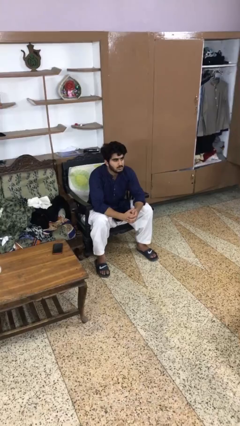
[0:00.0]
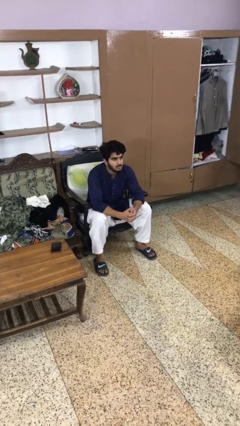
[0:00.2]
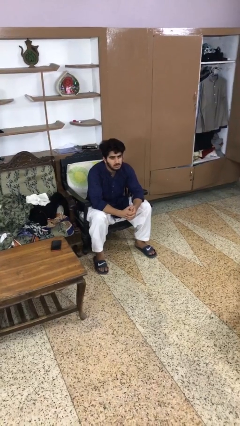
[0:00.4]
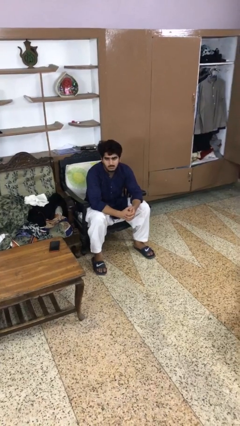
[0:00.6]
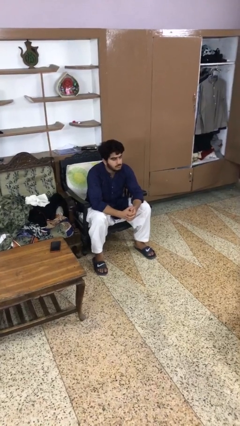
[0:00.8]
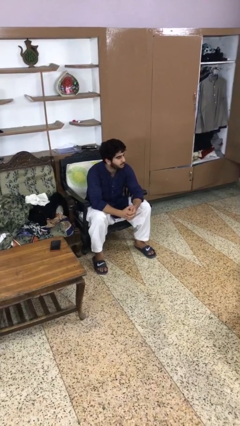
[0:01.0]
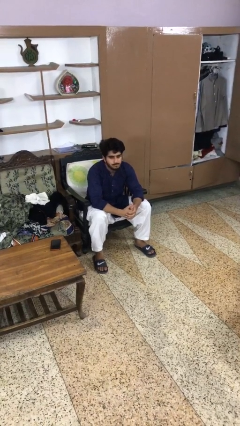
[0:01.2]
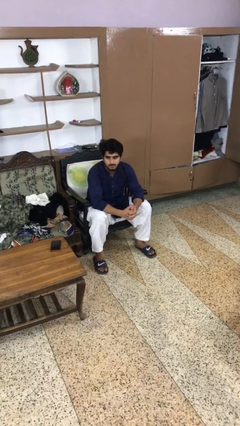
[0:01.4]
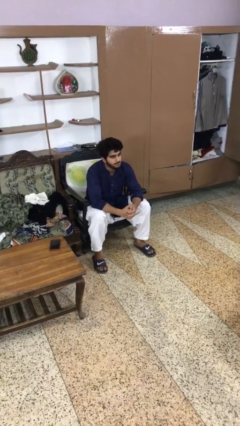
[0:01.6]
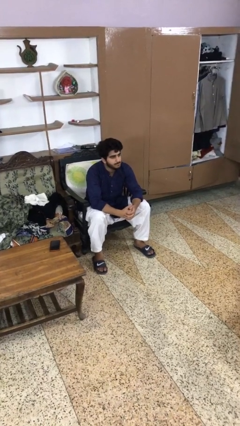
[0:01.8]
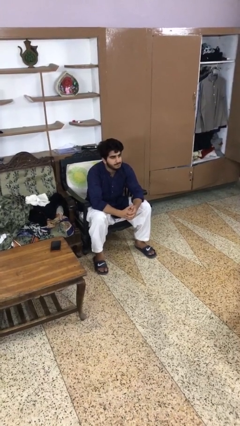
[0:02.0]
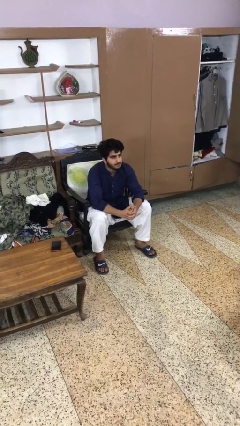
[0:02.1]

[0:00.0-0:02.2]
person shakes head

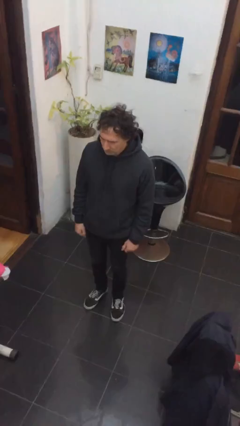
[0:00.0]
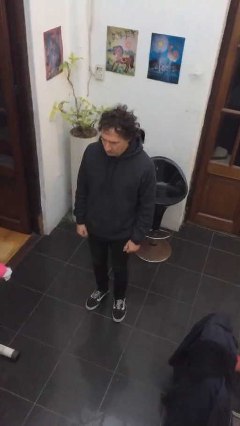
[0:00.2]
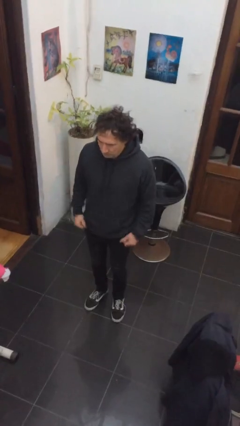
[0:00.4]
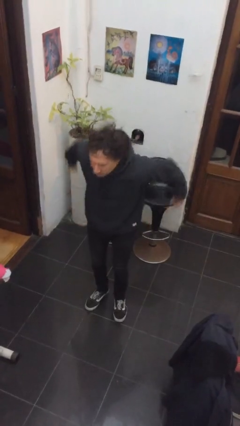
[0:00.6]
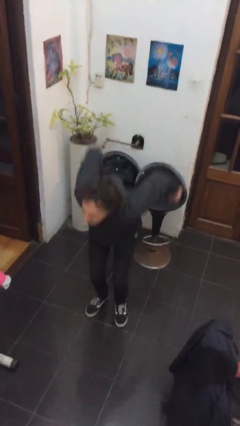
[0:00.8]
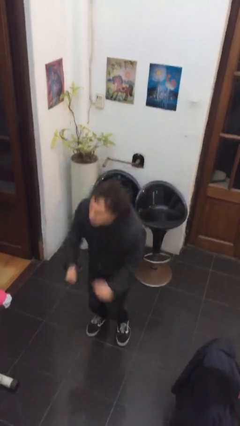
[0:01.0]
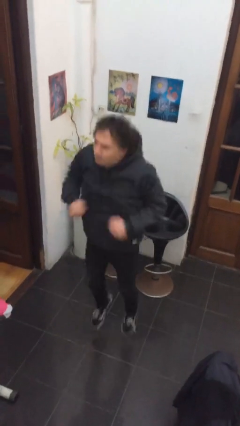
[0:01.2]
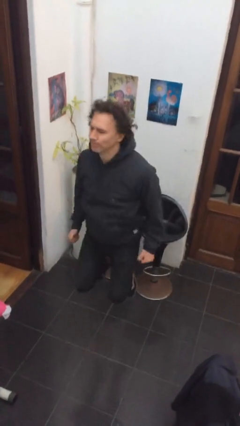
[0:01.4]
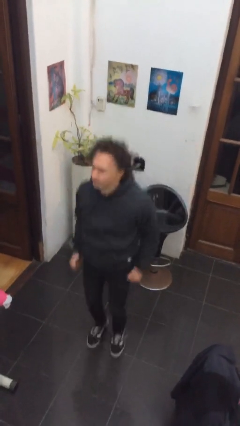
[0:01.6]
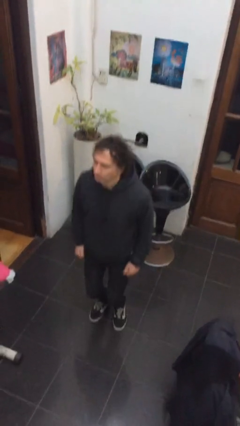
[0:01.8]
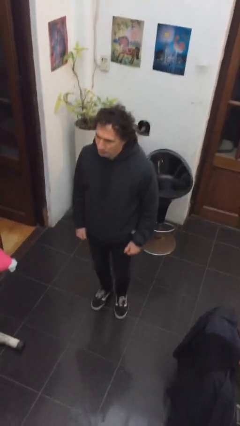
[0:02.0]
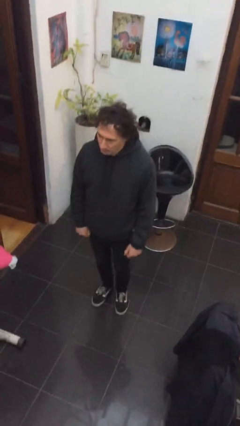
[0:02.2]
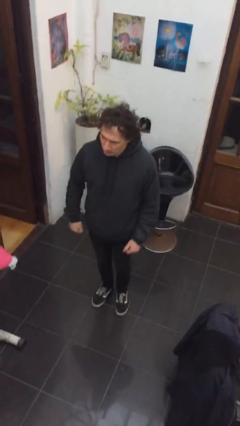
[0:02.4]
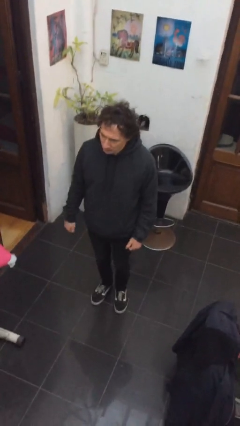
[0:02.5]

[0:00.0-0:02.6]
person jumps

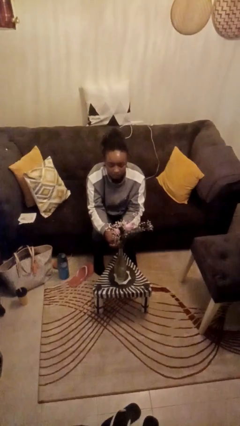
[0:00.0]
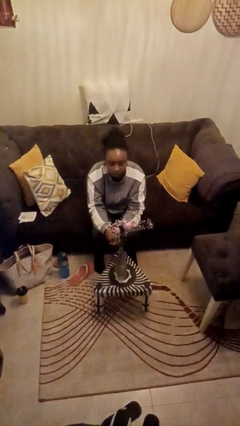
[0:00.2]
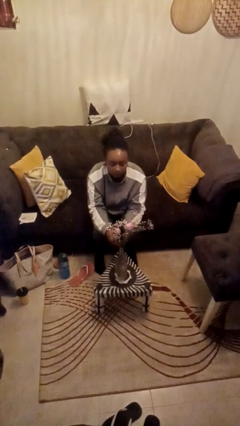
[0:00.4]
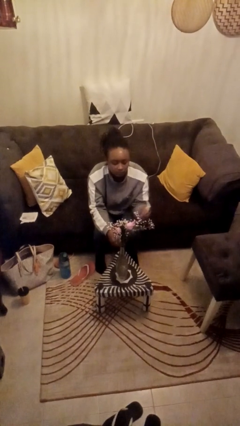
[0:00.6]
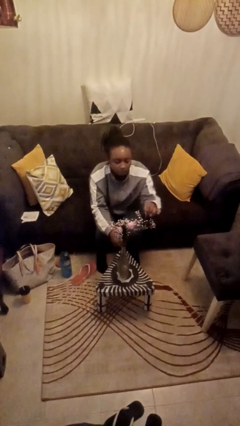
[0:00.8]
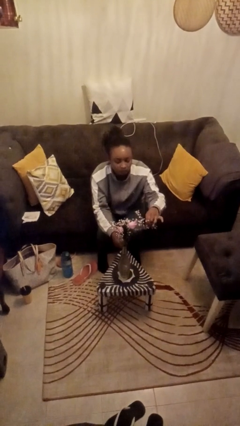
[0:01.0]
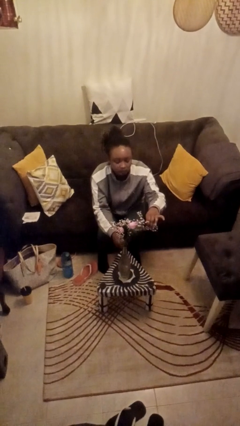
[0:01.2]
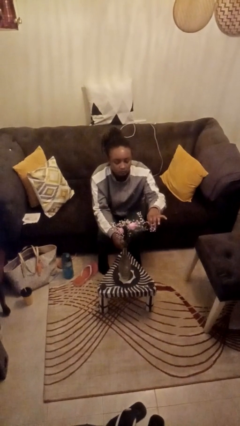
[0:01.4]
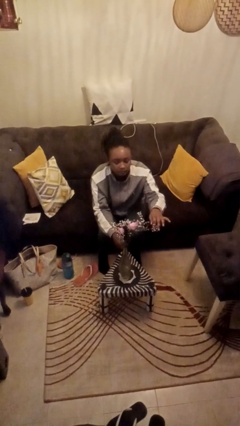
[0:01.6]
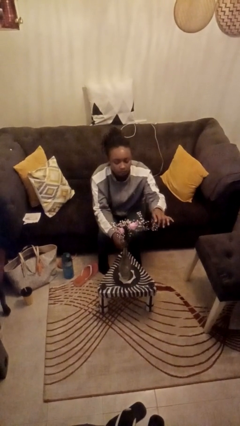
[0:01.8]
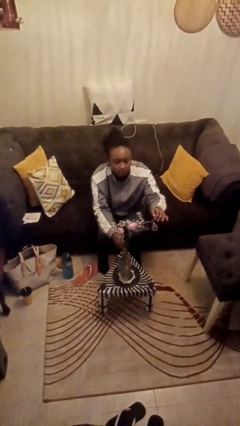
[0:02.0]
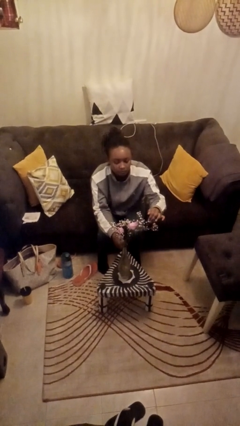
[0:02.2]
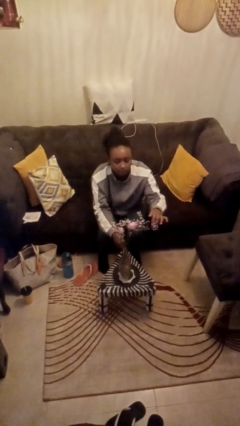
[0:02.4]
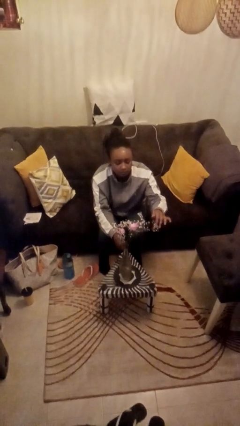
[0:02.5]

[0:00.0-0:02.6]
person arranges flowers in vase

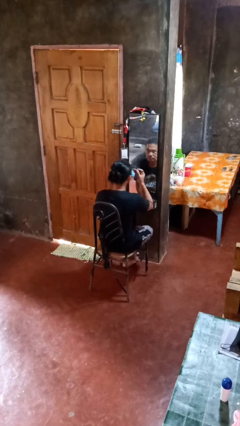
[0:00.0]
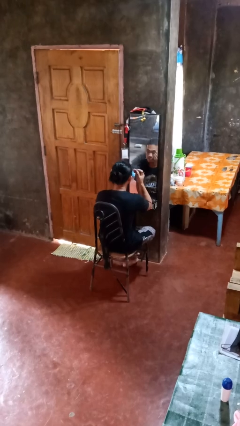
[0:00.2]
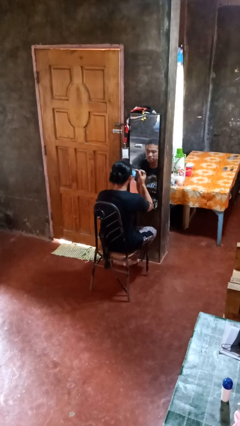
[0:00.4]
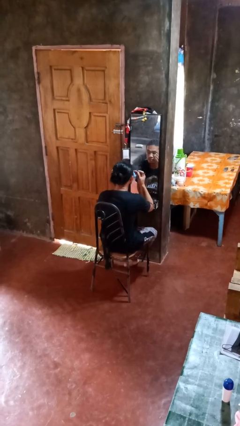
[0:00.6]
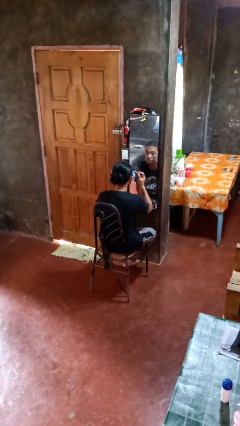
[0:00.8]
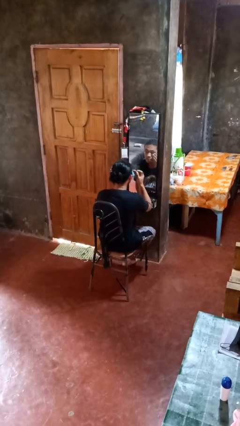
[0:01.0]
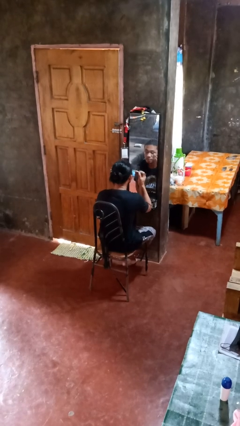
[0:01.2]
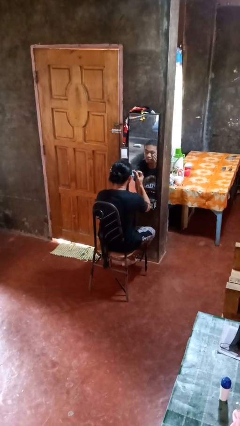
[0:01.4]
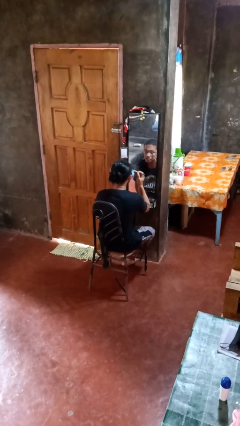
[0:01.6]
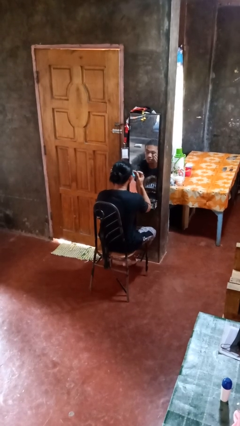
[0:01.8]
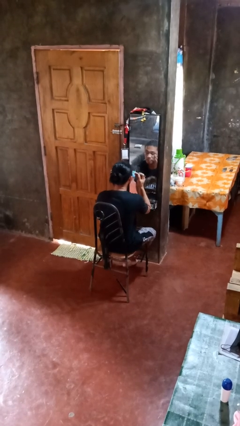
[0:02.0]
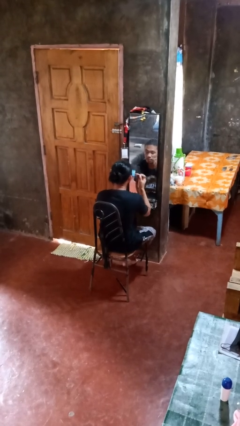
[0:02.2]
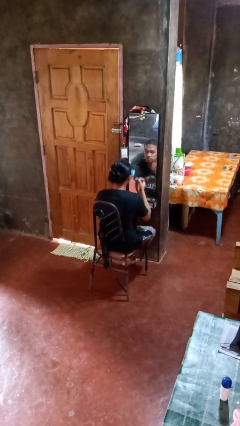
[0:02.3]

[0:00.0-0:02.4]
person applies eye makeup

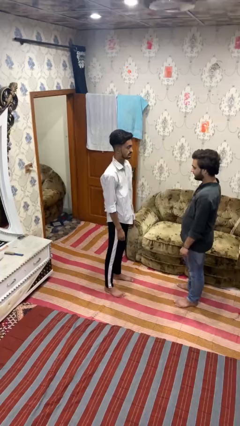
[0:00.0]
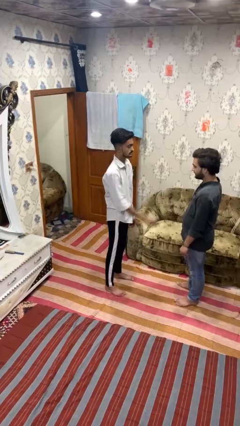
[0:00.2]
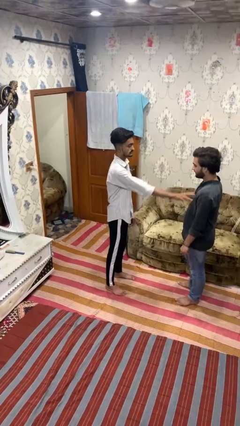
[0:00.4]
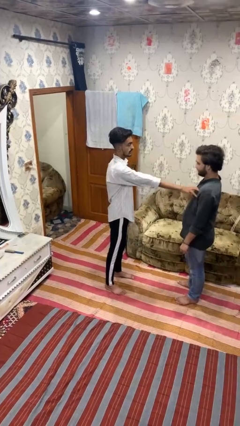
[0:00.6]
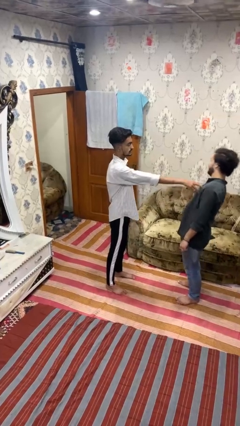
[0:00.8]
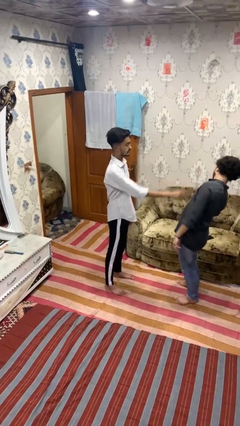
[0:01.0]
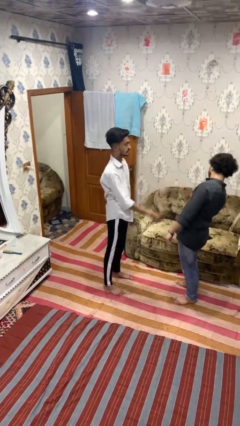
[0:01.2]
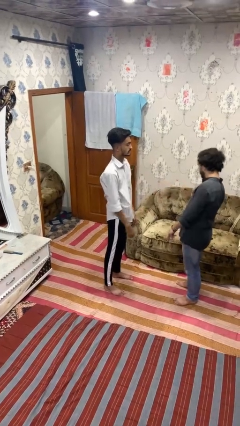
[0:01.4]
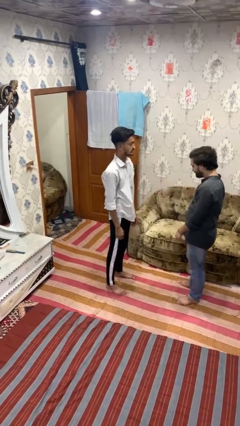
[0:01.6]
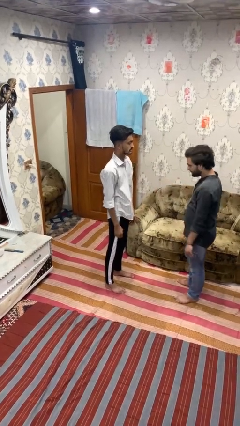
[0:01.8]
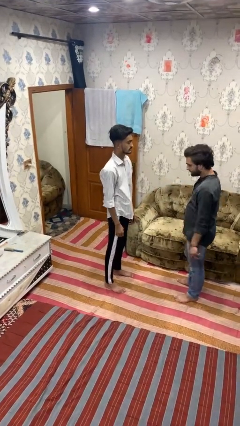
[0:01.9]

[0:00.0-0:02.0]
person shoves person

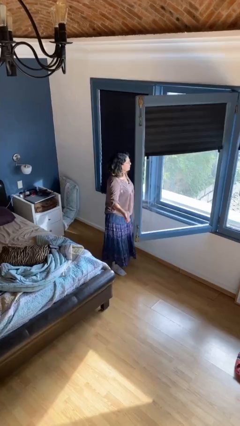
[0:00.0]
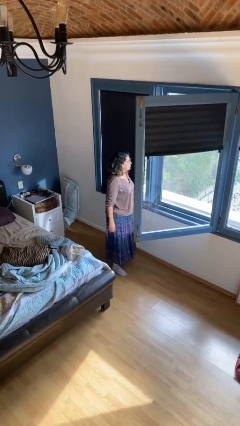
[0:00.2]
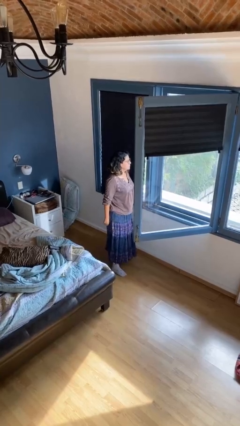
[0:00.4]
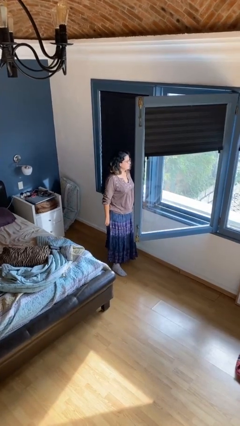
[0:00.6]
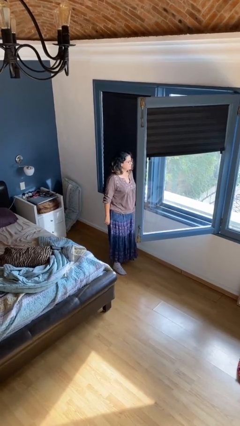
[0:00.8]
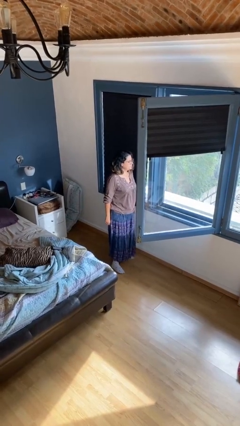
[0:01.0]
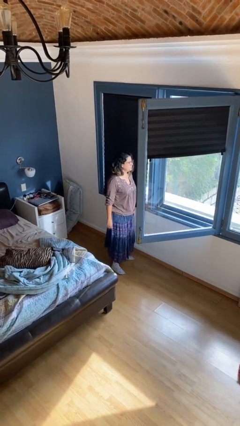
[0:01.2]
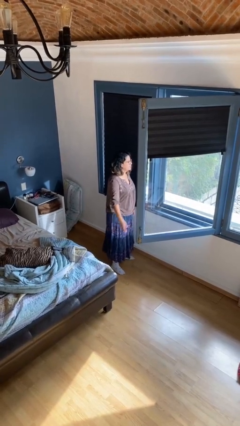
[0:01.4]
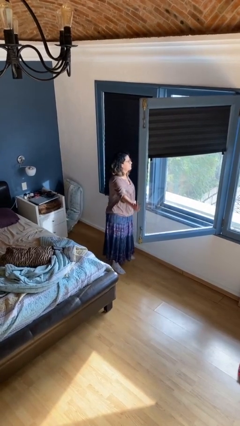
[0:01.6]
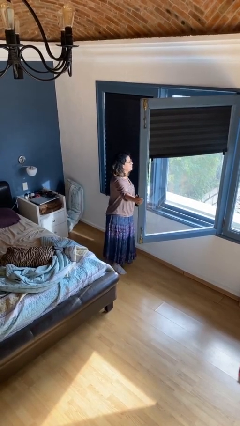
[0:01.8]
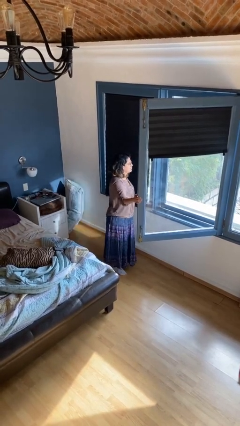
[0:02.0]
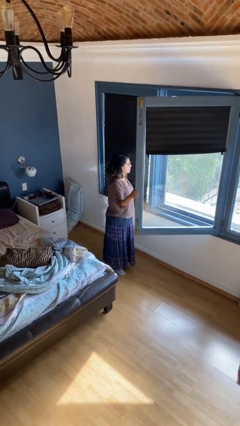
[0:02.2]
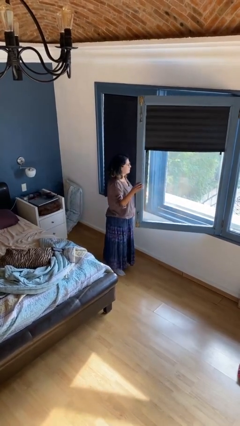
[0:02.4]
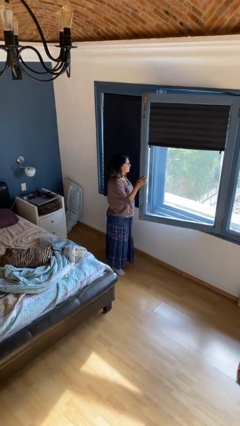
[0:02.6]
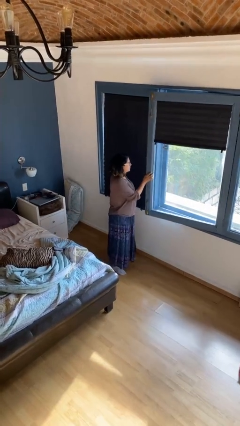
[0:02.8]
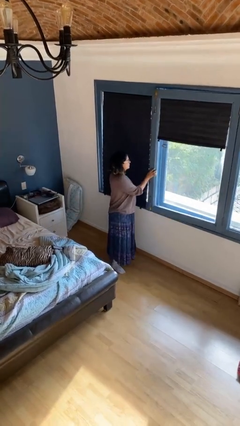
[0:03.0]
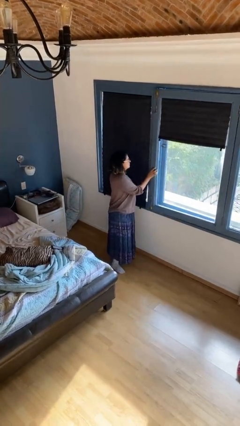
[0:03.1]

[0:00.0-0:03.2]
person closes home window

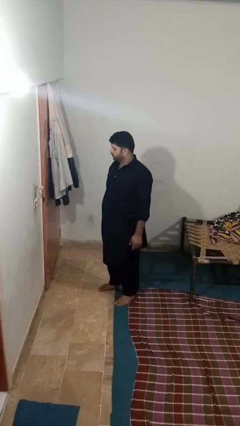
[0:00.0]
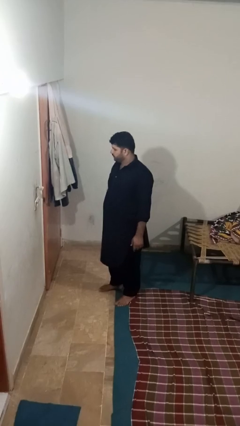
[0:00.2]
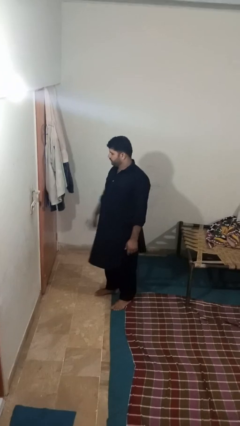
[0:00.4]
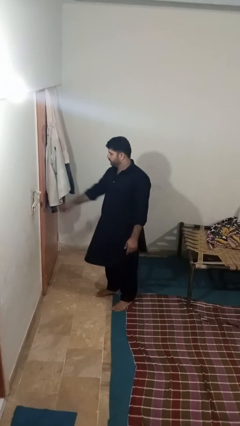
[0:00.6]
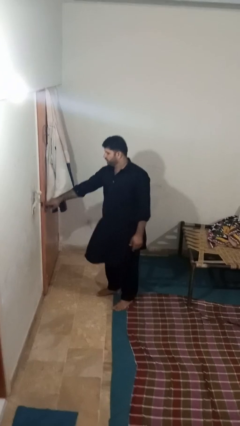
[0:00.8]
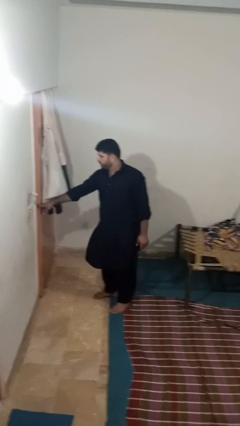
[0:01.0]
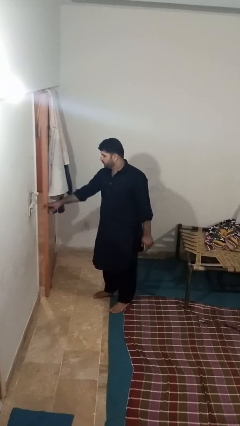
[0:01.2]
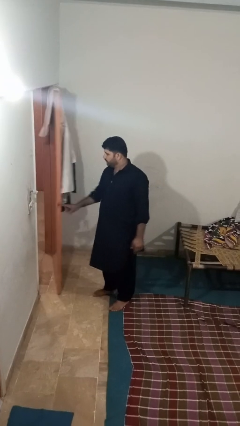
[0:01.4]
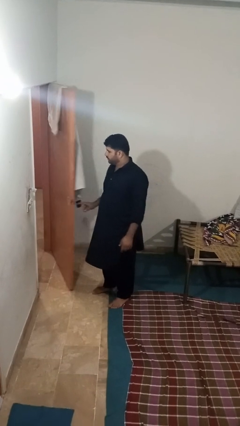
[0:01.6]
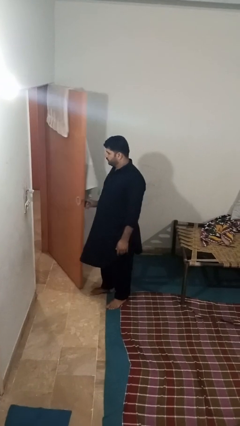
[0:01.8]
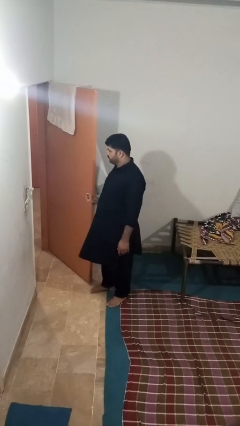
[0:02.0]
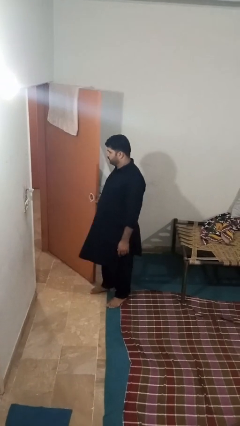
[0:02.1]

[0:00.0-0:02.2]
person opens gate
